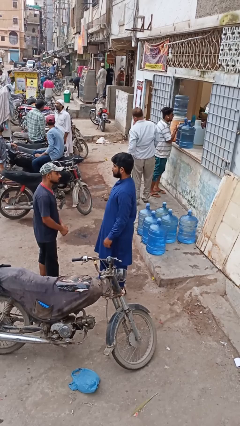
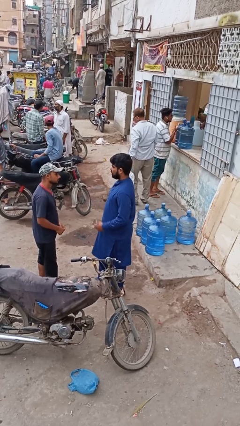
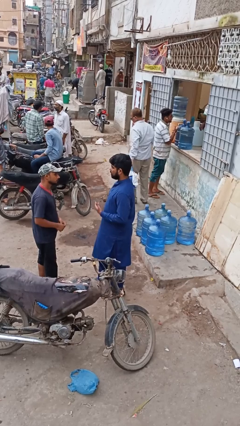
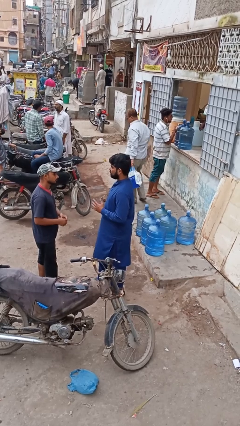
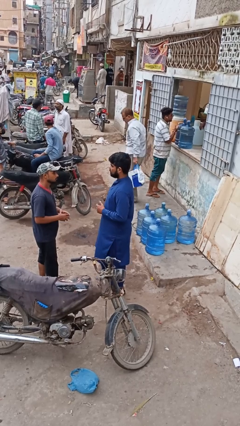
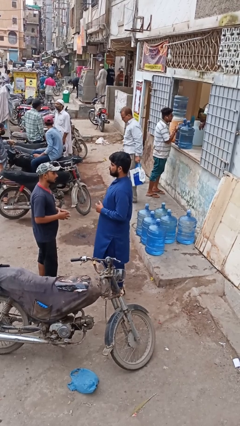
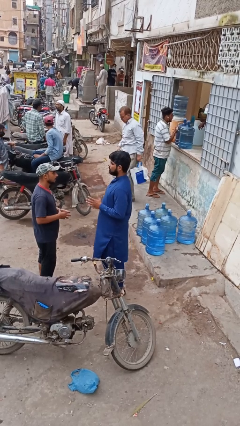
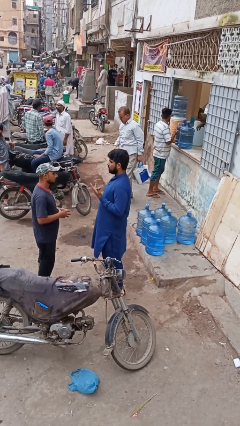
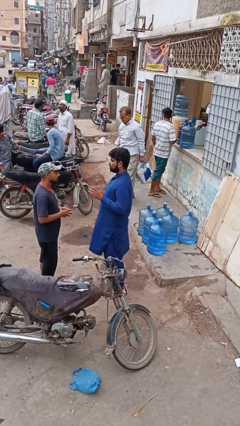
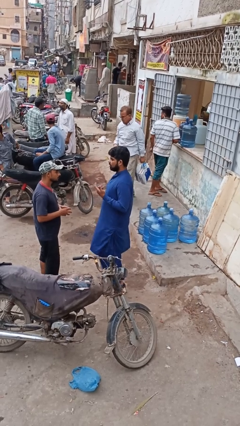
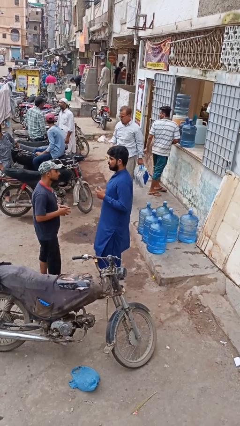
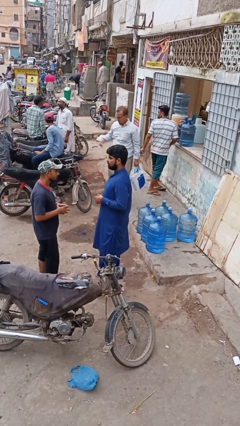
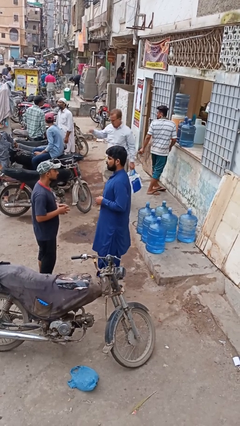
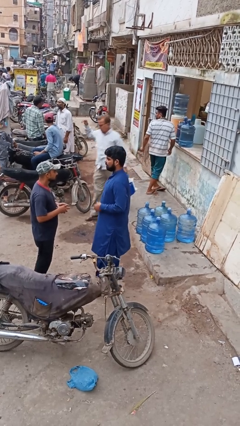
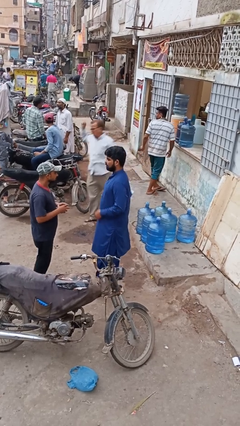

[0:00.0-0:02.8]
person talks to person

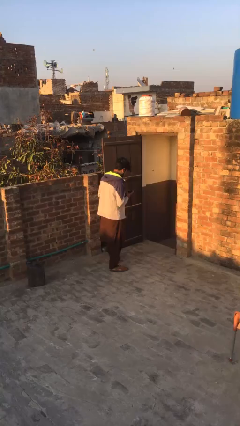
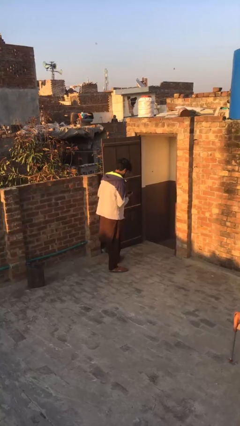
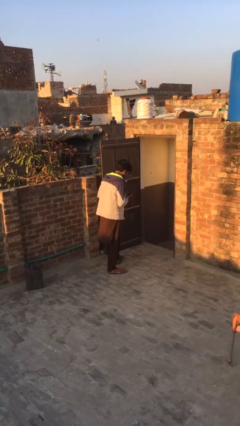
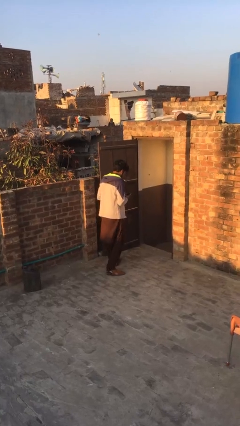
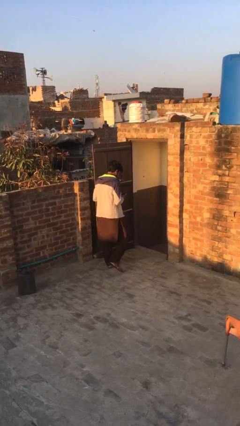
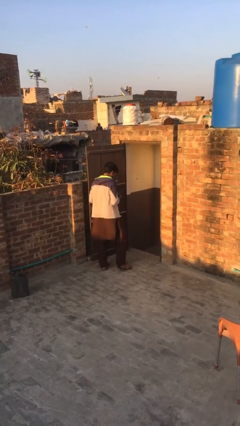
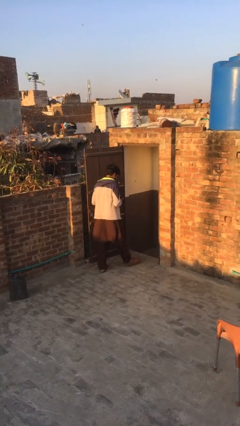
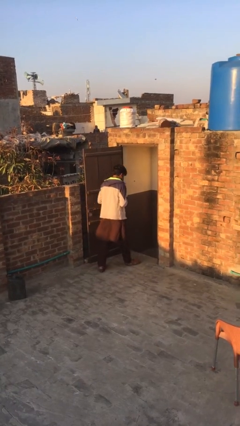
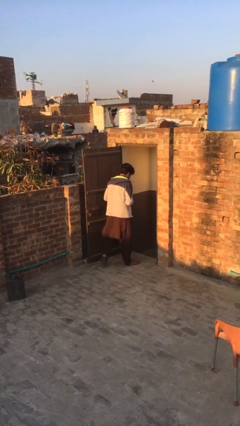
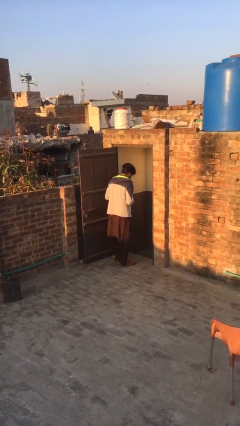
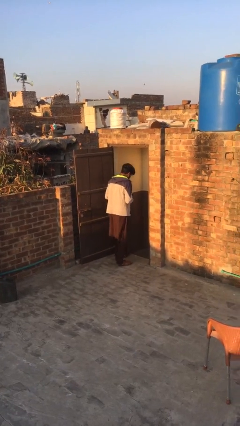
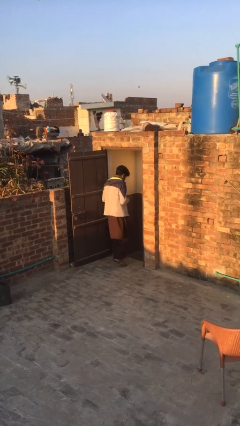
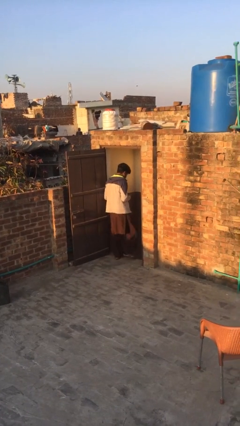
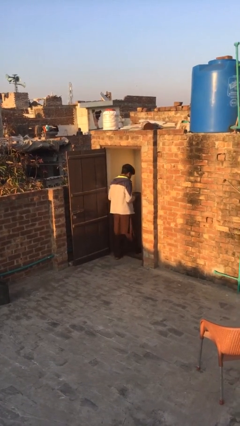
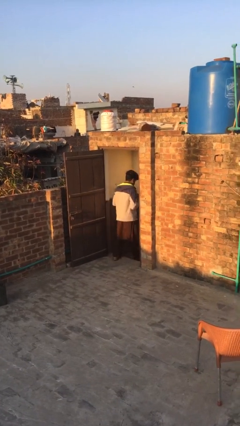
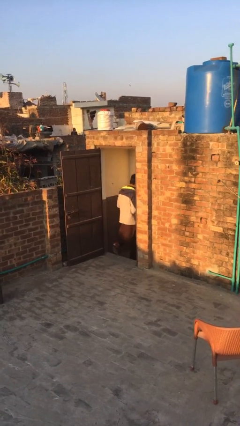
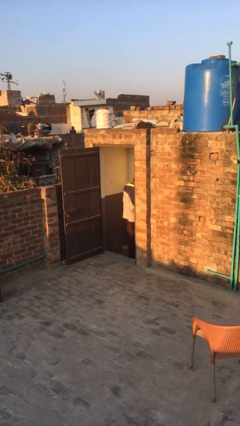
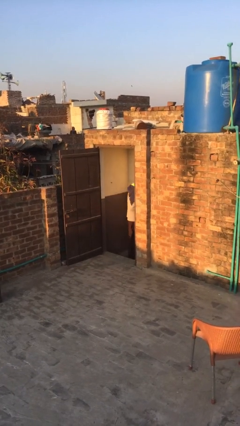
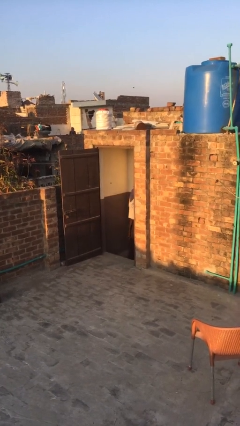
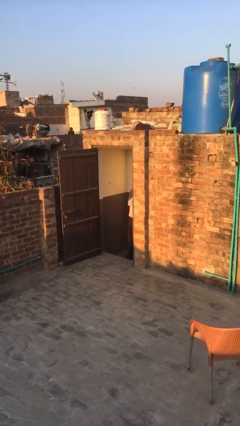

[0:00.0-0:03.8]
person enters scene through structure

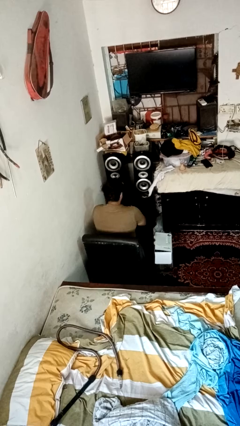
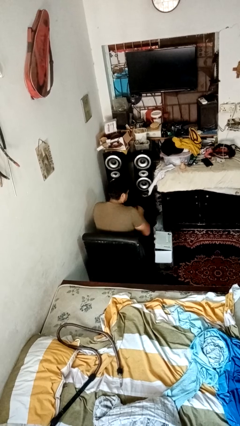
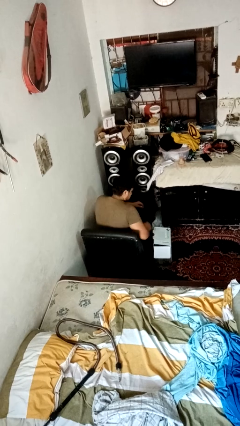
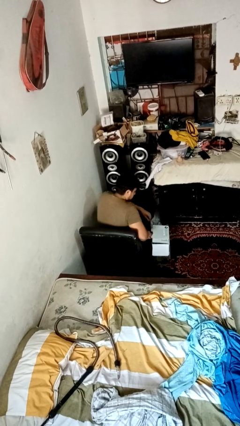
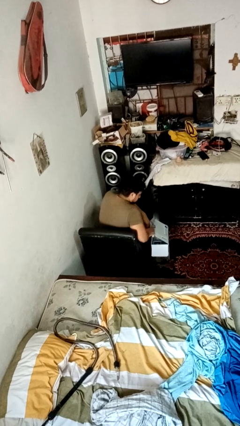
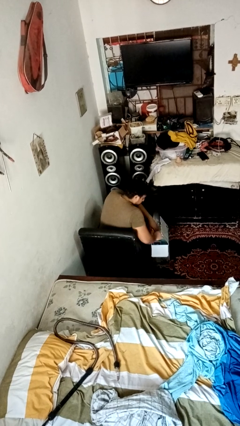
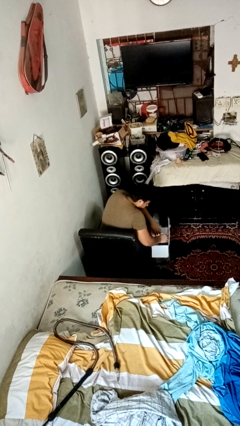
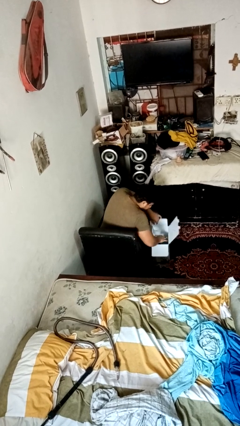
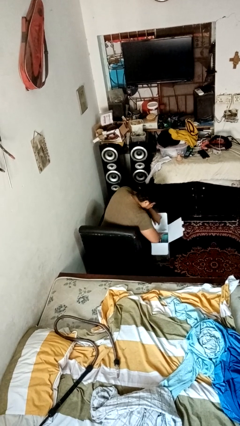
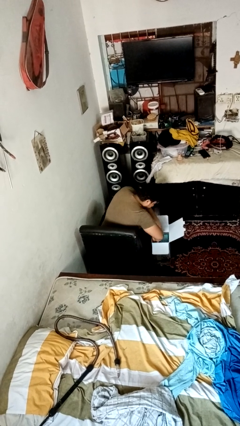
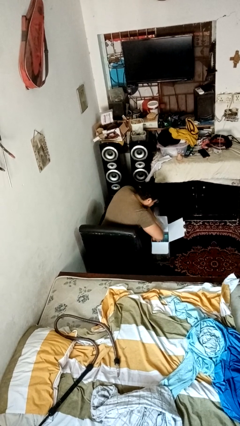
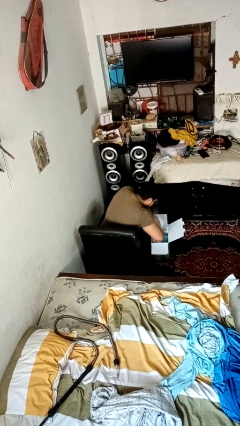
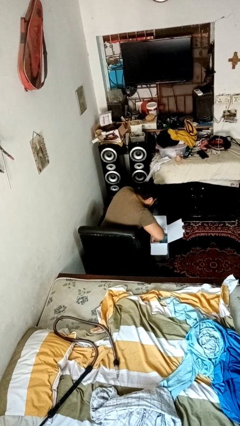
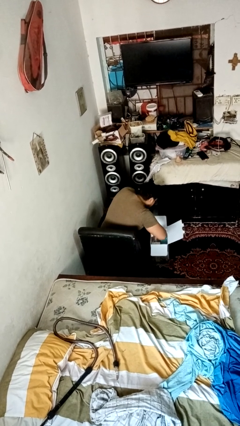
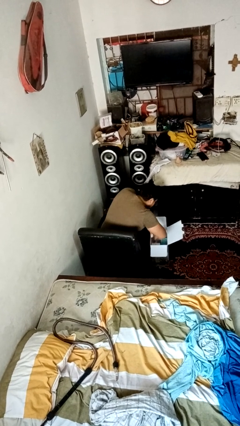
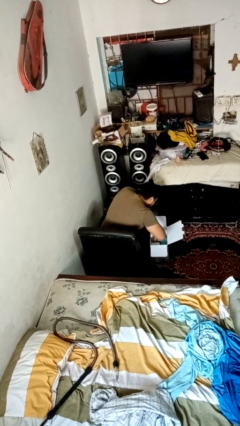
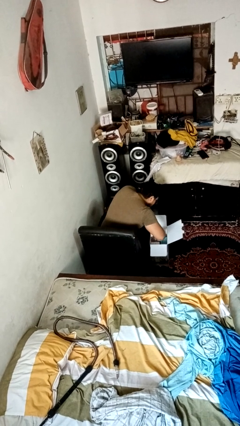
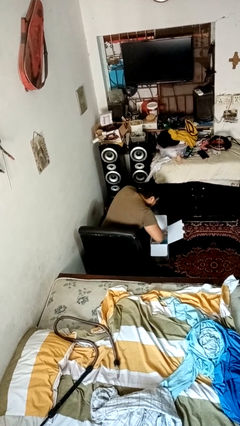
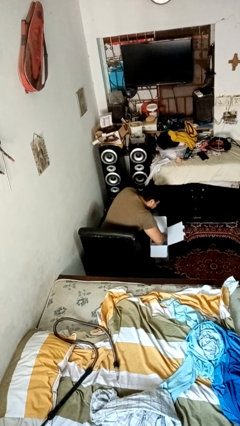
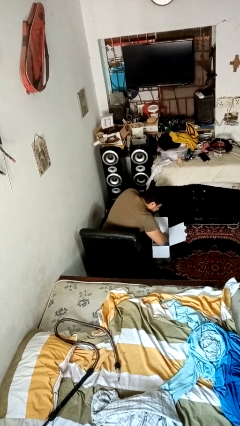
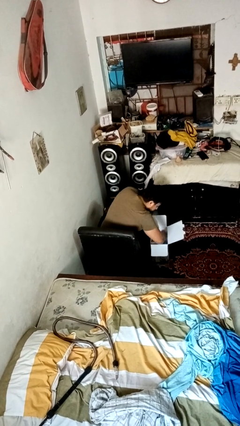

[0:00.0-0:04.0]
person searches in box

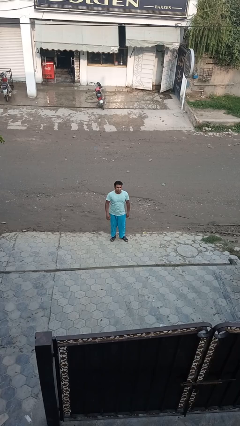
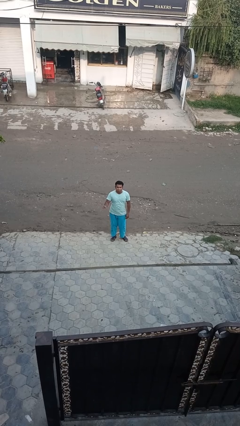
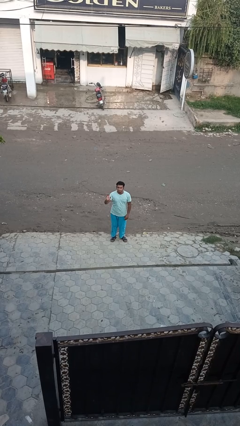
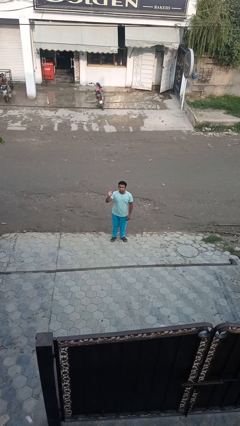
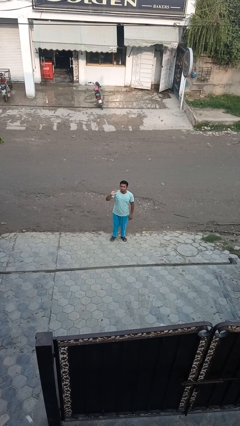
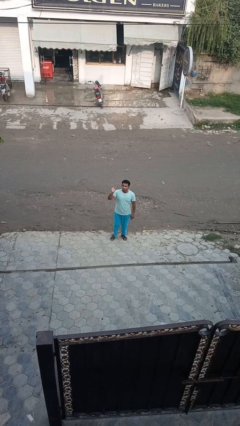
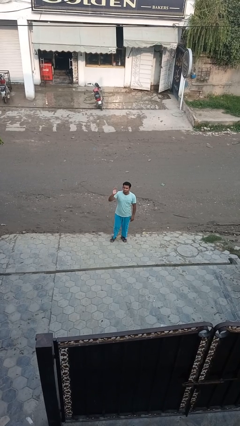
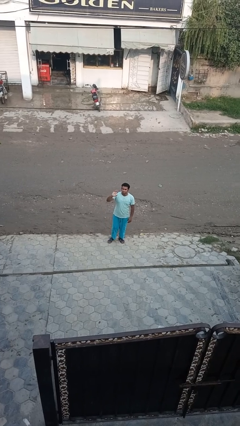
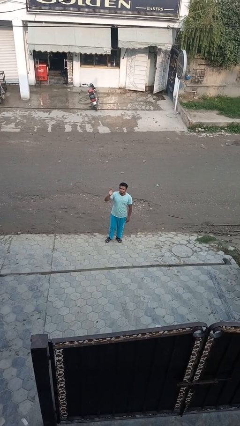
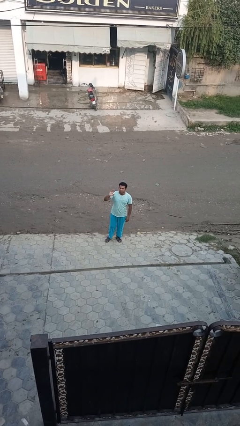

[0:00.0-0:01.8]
person waves at person

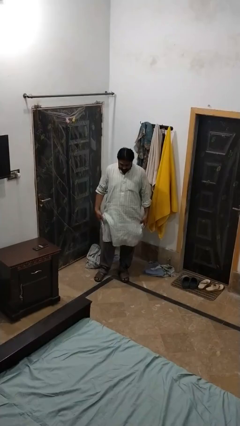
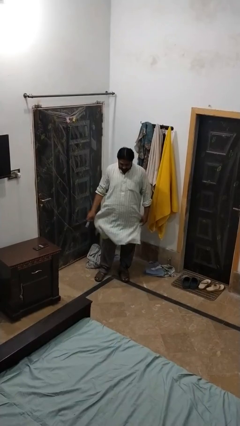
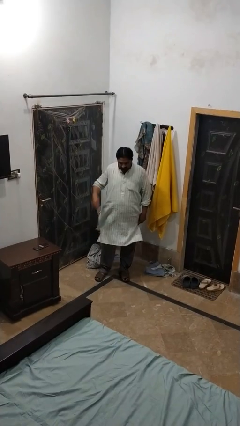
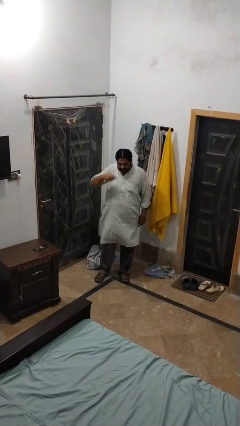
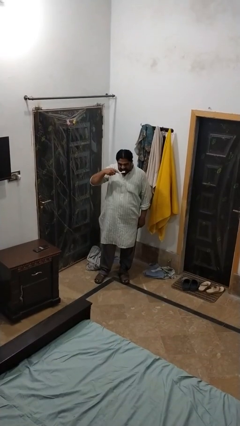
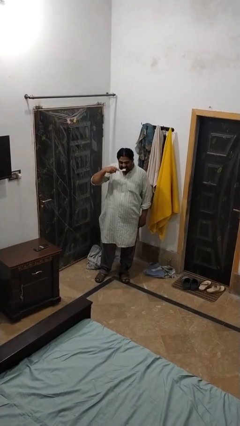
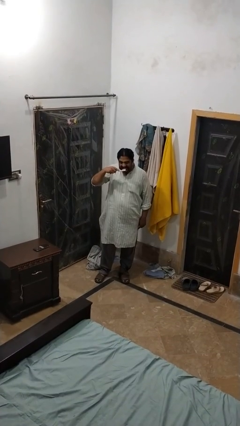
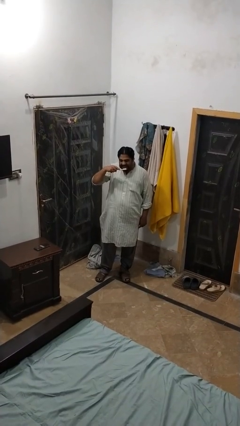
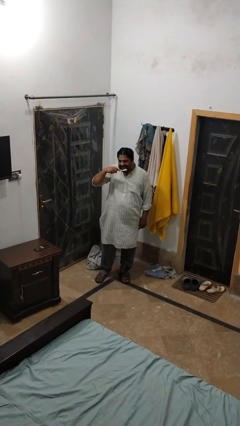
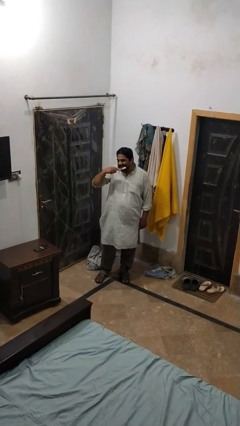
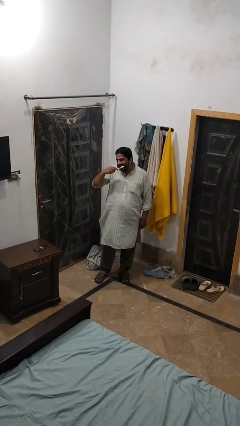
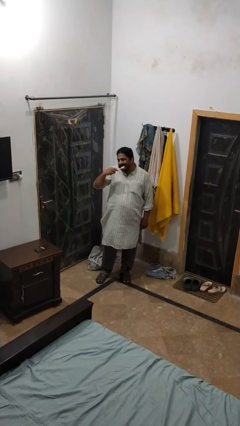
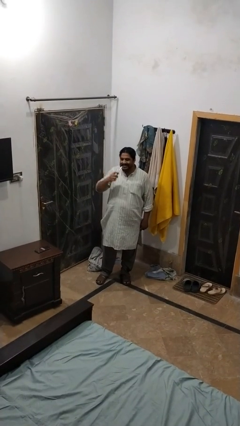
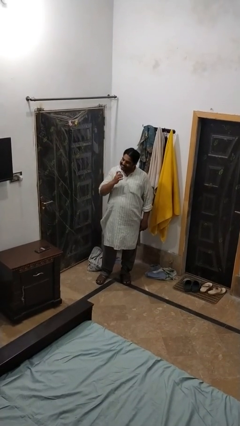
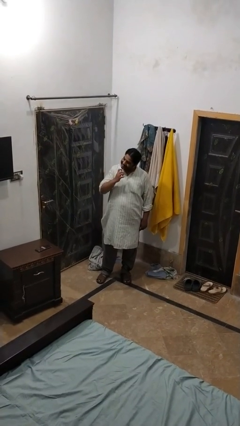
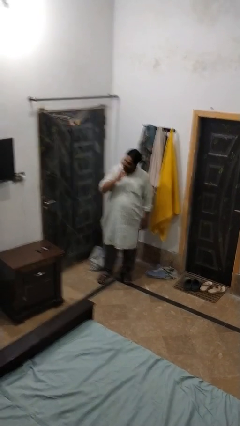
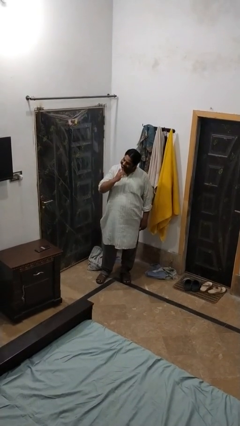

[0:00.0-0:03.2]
person brushes teeth

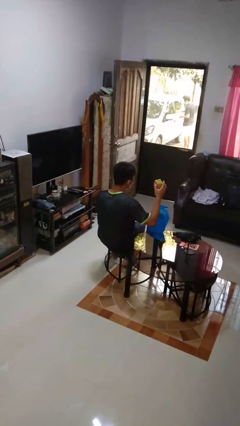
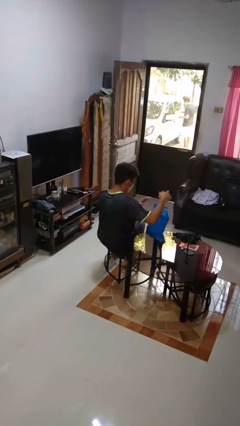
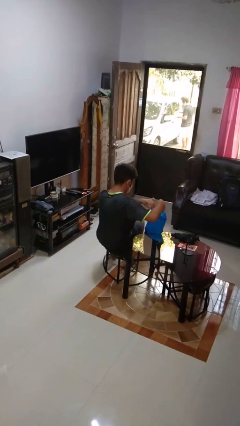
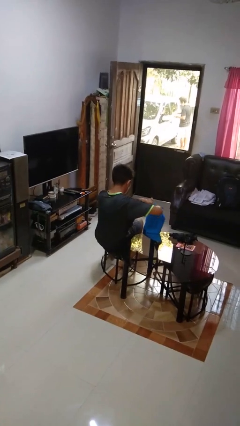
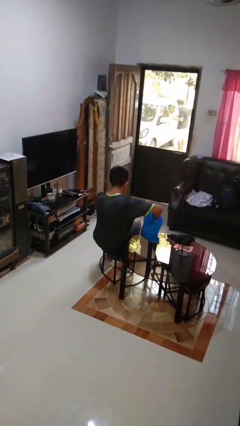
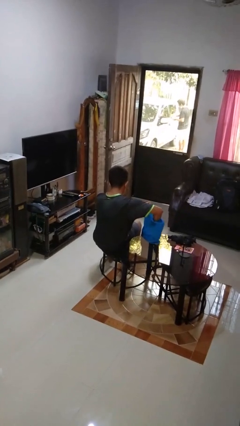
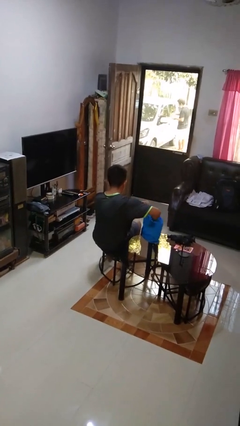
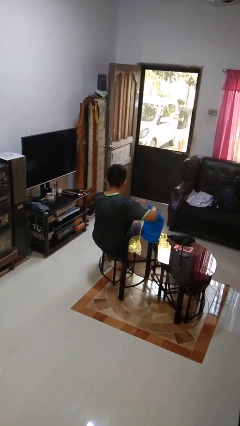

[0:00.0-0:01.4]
person puts object into bag
